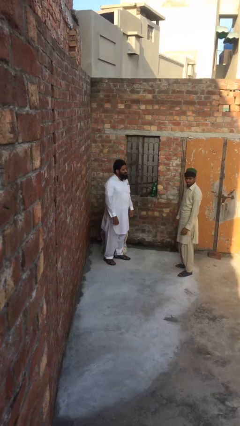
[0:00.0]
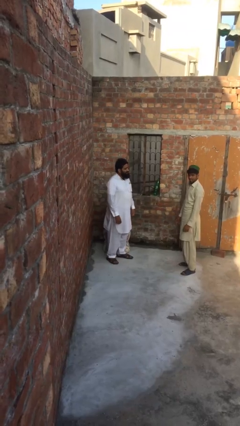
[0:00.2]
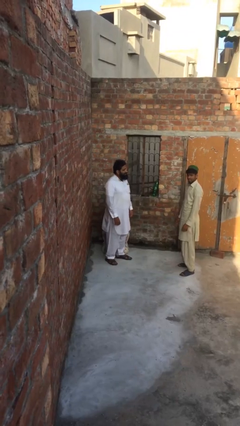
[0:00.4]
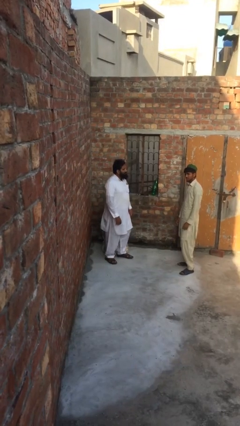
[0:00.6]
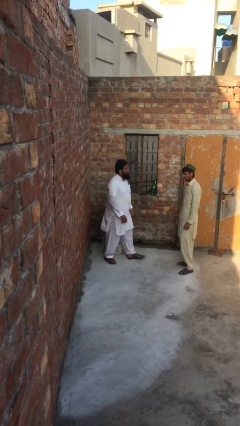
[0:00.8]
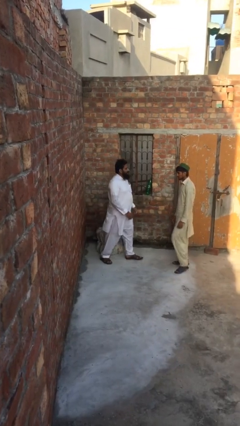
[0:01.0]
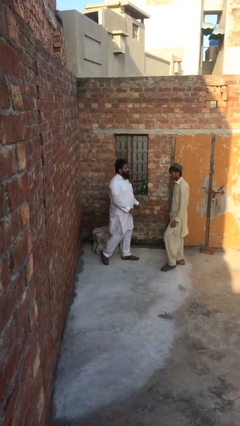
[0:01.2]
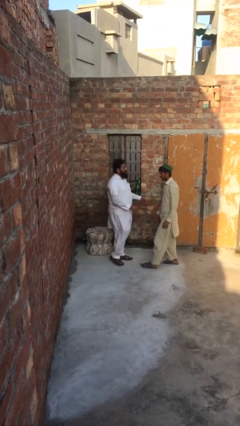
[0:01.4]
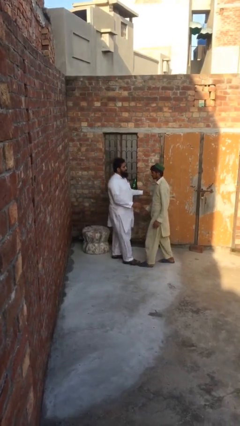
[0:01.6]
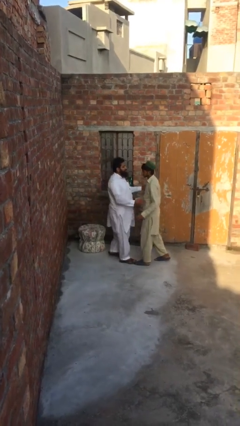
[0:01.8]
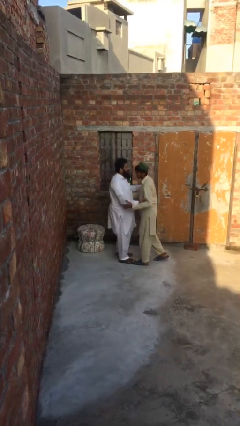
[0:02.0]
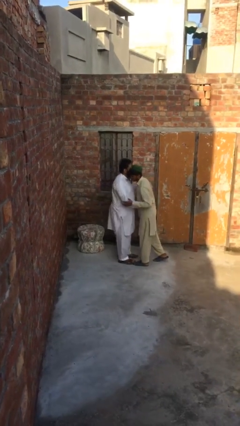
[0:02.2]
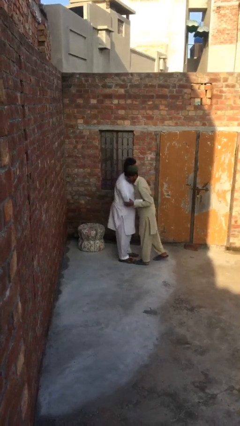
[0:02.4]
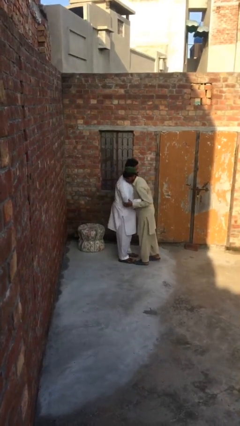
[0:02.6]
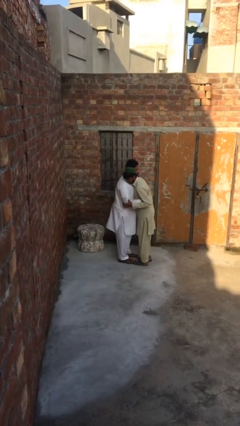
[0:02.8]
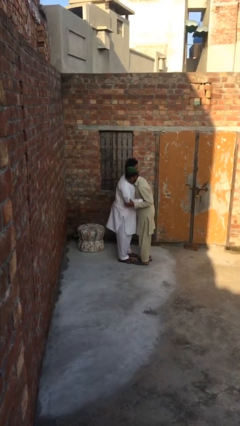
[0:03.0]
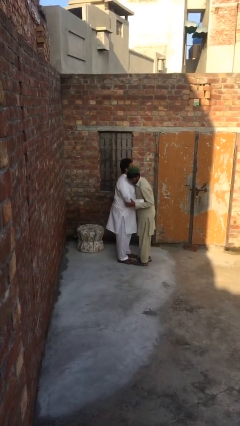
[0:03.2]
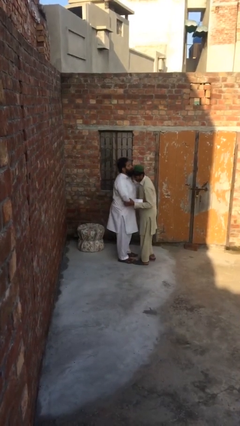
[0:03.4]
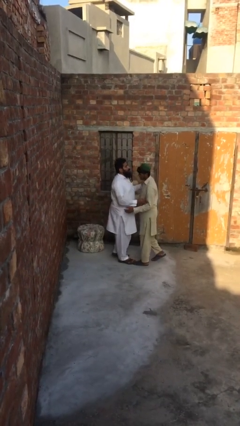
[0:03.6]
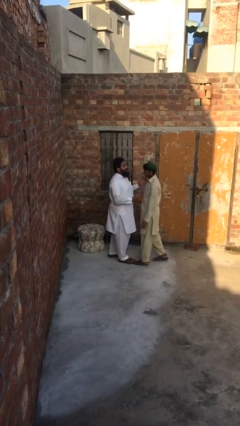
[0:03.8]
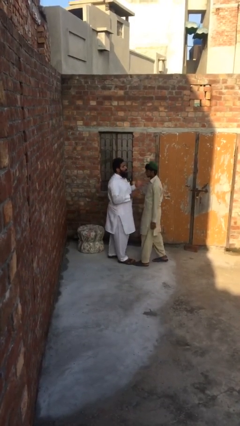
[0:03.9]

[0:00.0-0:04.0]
person embraces person

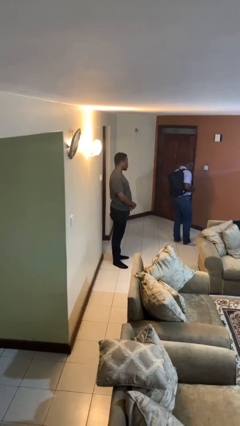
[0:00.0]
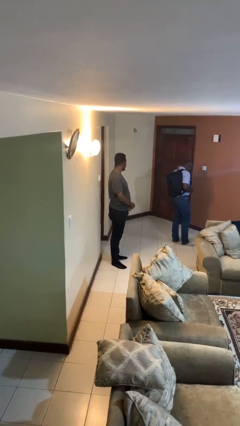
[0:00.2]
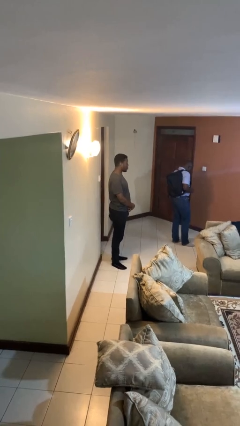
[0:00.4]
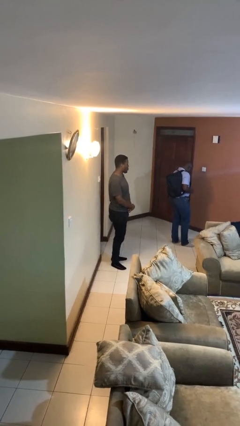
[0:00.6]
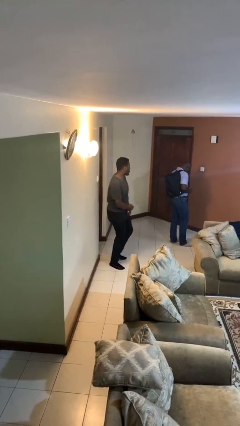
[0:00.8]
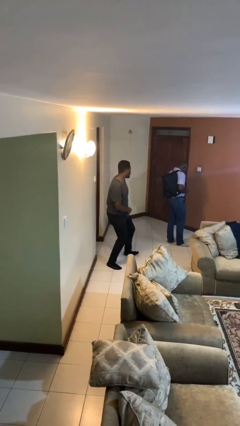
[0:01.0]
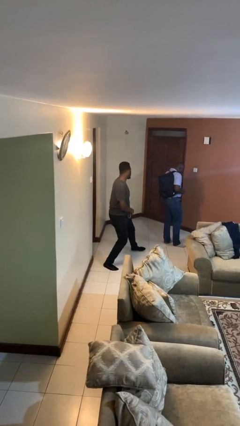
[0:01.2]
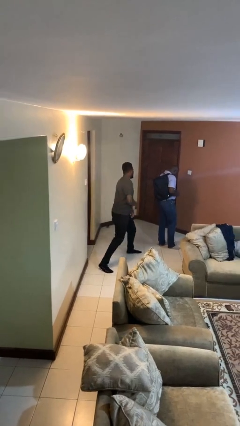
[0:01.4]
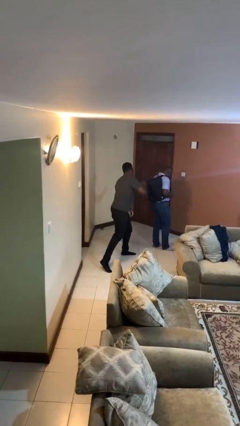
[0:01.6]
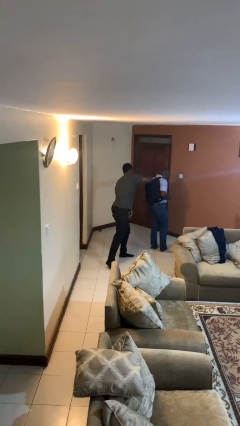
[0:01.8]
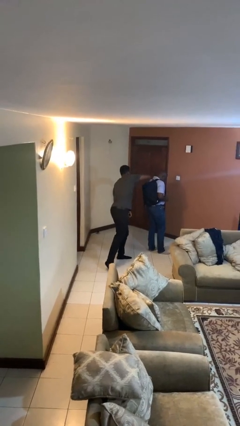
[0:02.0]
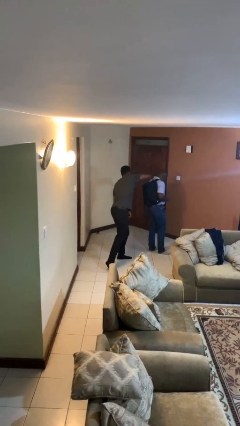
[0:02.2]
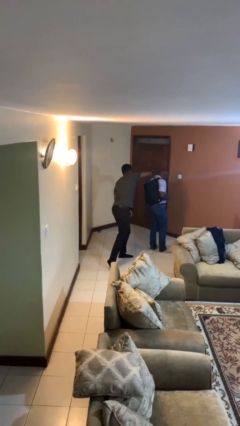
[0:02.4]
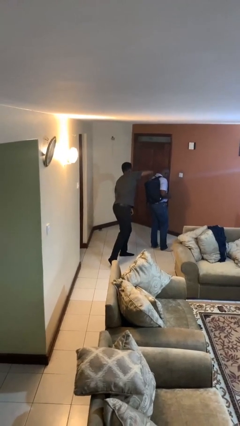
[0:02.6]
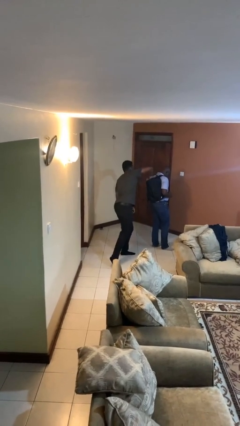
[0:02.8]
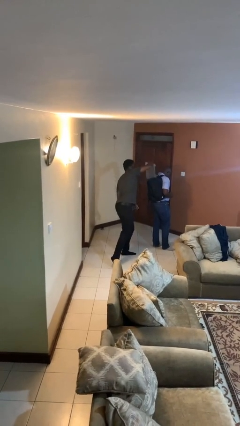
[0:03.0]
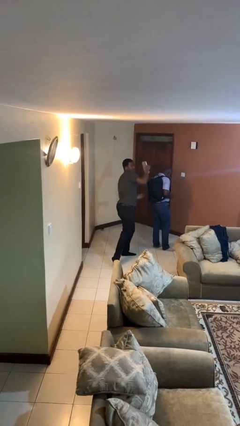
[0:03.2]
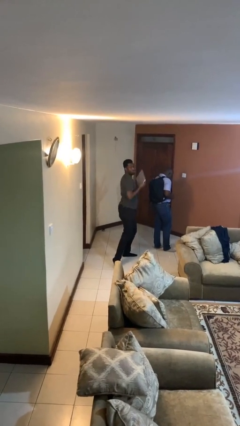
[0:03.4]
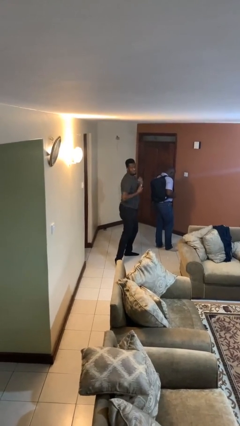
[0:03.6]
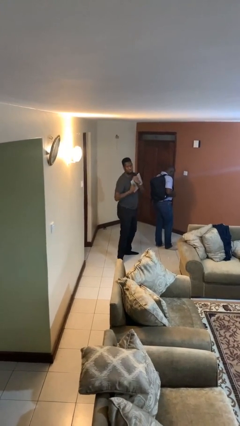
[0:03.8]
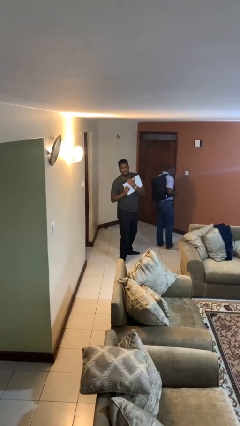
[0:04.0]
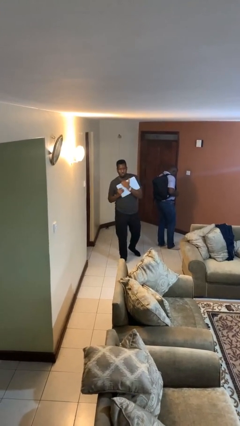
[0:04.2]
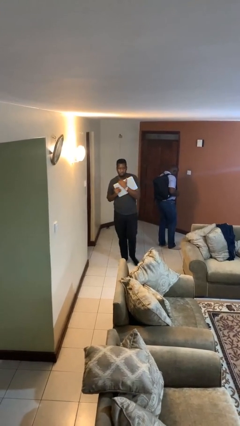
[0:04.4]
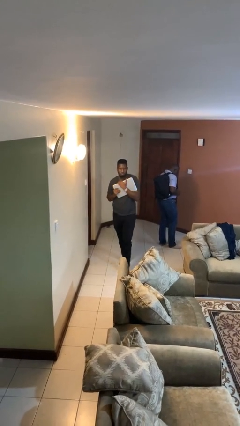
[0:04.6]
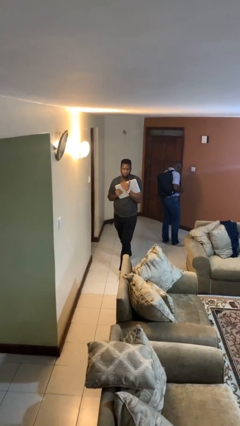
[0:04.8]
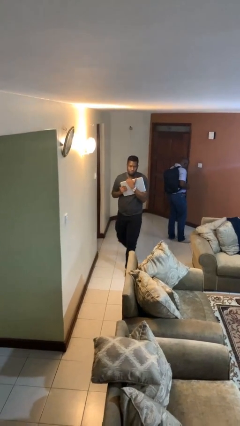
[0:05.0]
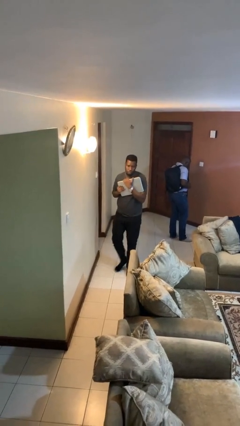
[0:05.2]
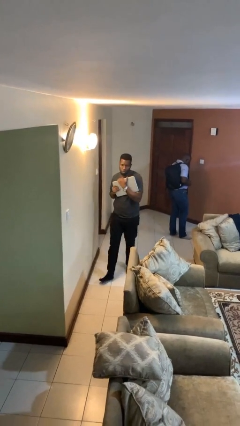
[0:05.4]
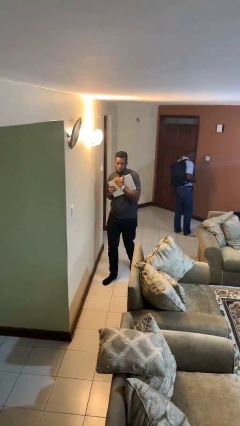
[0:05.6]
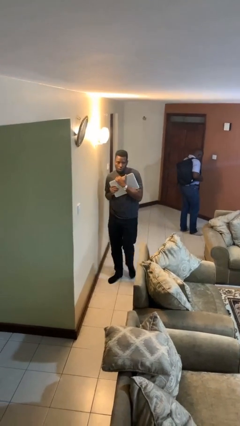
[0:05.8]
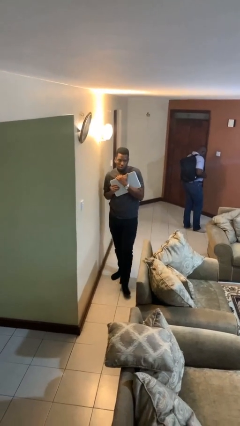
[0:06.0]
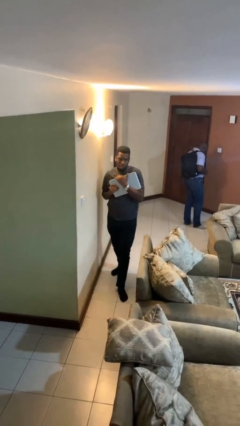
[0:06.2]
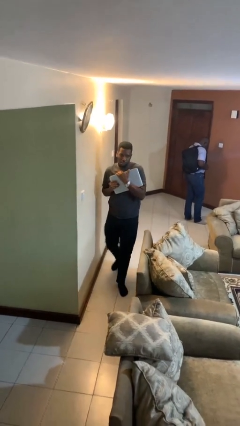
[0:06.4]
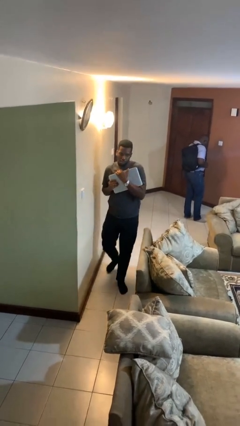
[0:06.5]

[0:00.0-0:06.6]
person steals object from person

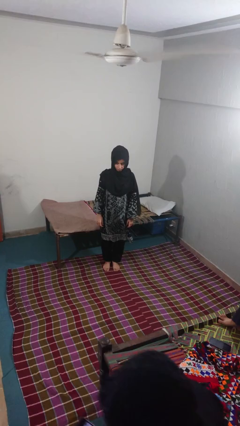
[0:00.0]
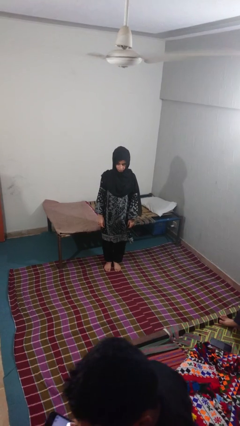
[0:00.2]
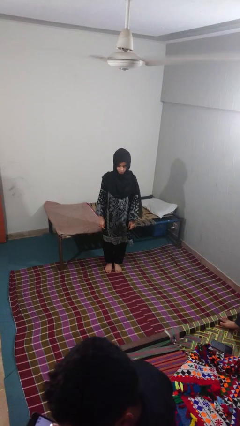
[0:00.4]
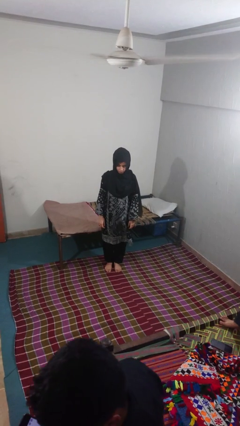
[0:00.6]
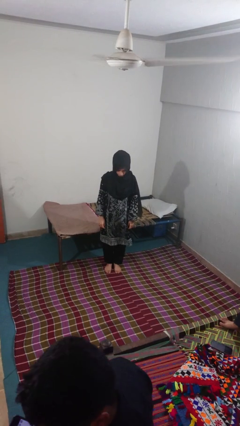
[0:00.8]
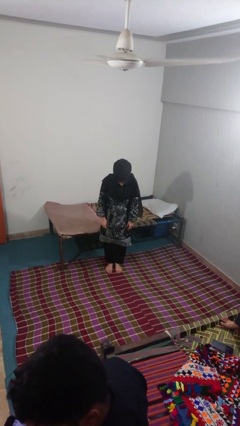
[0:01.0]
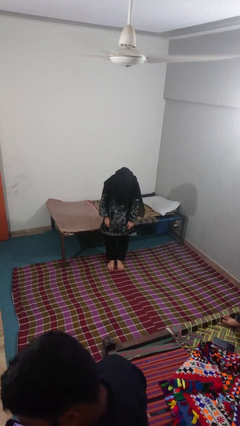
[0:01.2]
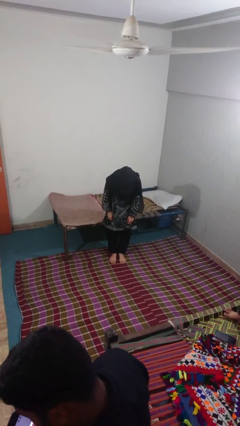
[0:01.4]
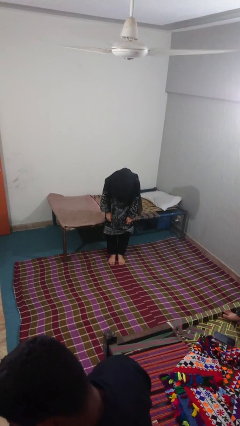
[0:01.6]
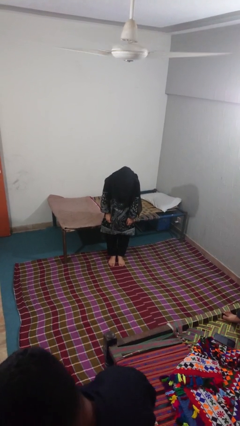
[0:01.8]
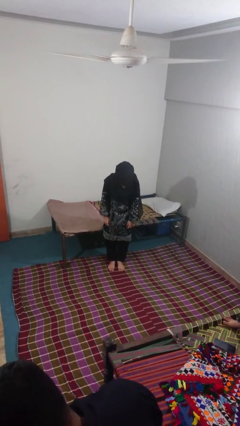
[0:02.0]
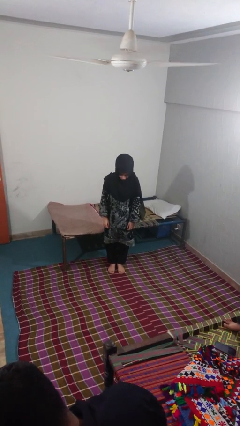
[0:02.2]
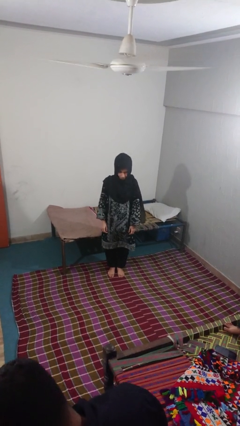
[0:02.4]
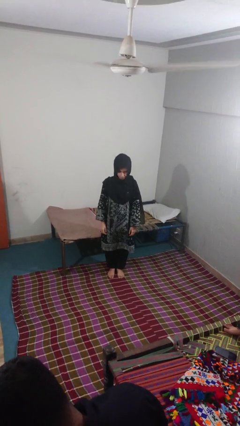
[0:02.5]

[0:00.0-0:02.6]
person bows

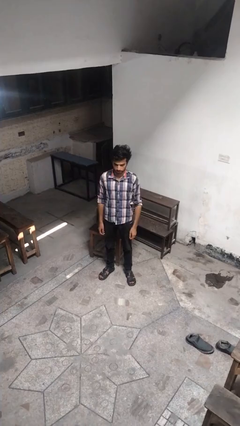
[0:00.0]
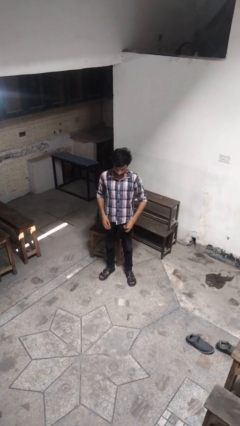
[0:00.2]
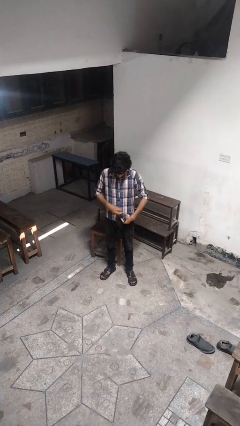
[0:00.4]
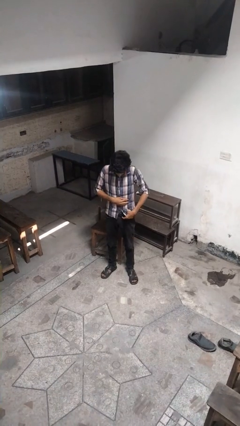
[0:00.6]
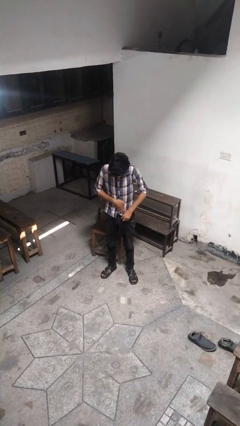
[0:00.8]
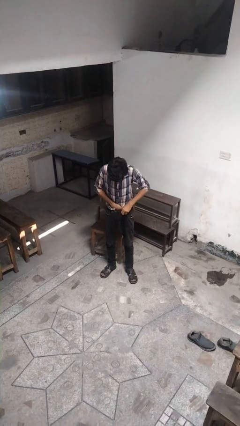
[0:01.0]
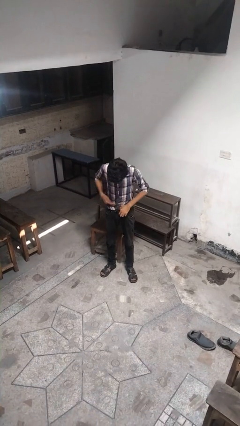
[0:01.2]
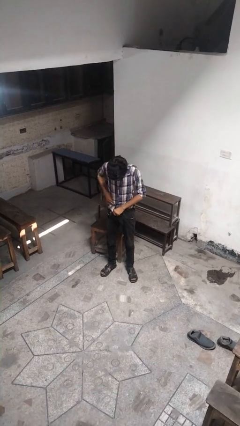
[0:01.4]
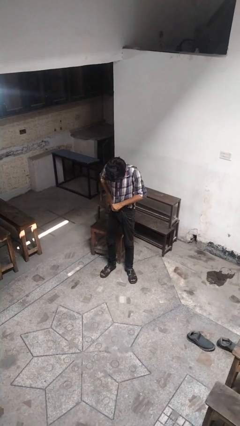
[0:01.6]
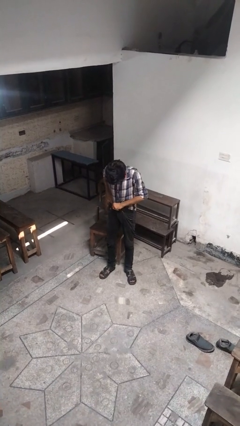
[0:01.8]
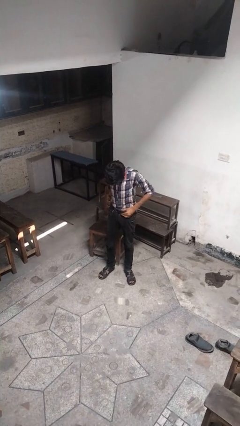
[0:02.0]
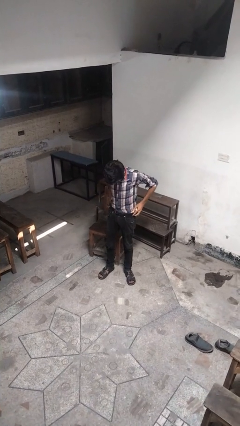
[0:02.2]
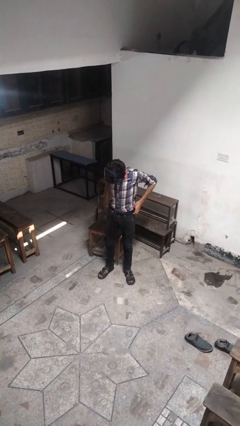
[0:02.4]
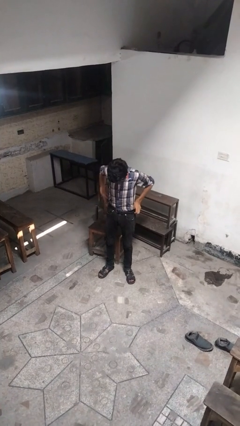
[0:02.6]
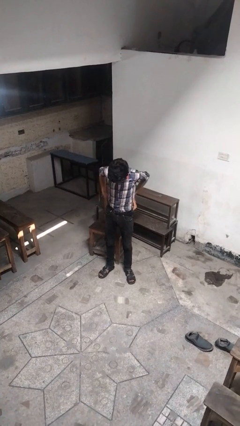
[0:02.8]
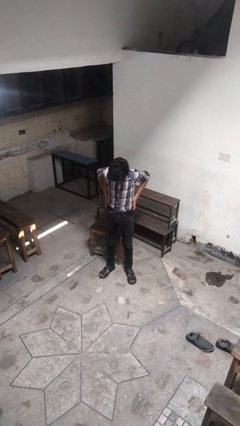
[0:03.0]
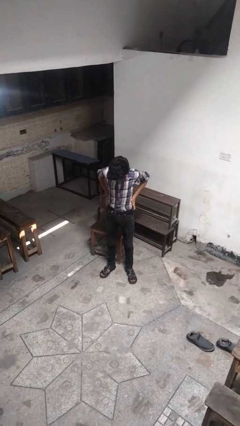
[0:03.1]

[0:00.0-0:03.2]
person tucks in shirt

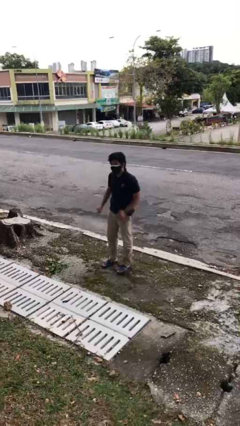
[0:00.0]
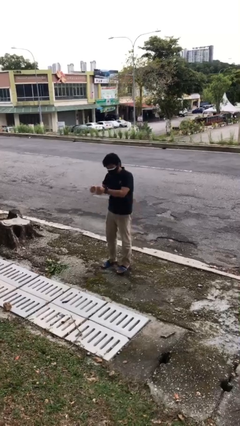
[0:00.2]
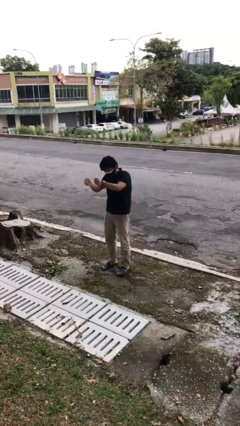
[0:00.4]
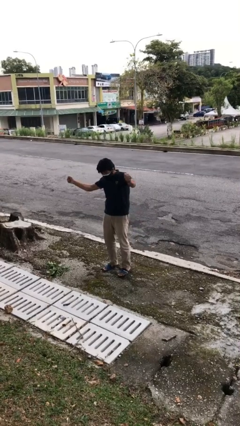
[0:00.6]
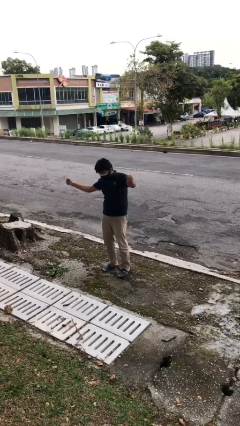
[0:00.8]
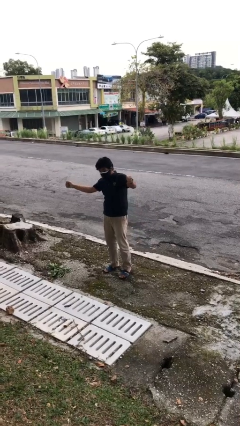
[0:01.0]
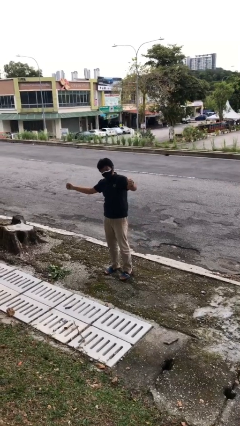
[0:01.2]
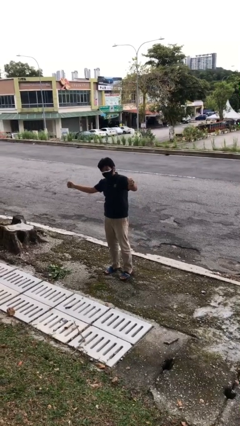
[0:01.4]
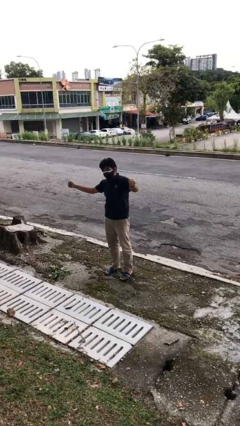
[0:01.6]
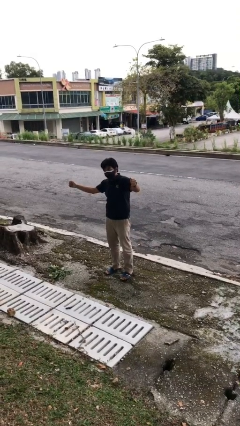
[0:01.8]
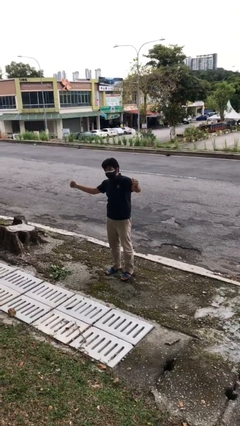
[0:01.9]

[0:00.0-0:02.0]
person gestures zoom in
